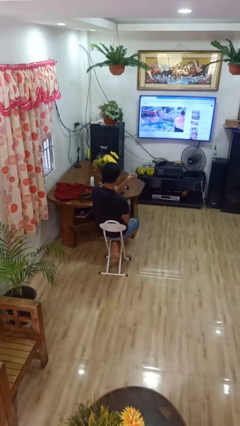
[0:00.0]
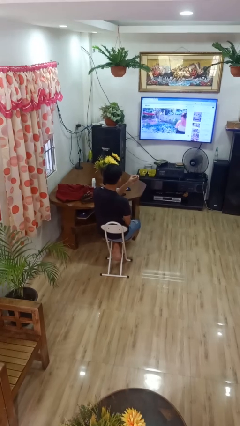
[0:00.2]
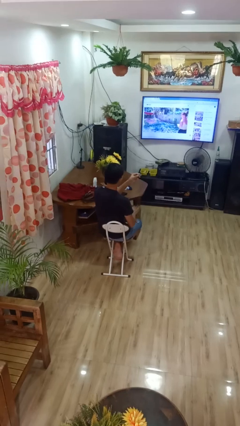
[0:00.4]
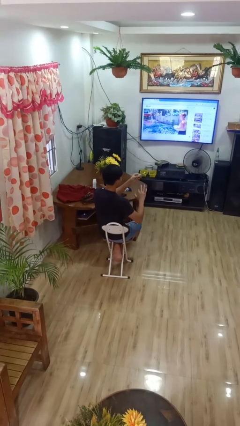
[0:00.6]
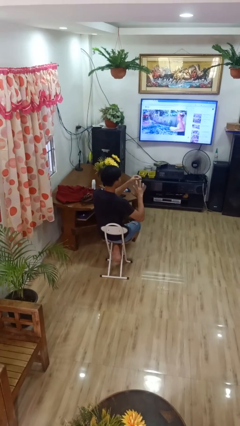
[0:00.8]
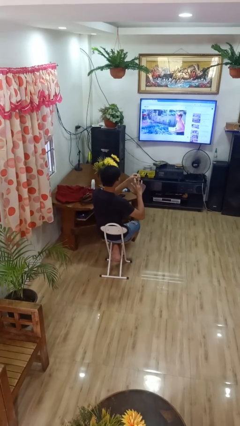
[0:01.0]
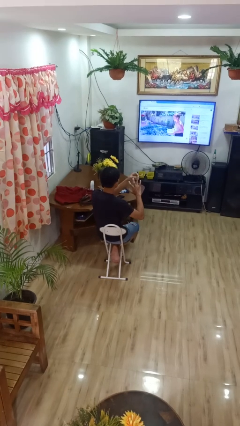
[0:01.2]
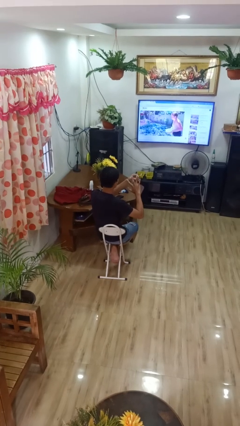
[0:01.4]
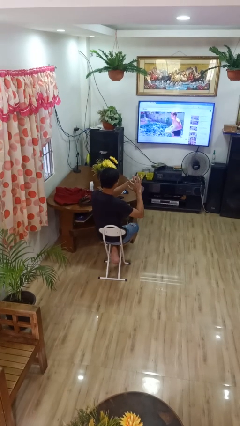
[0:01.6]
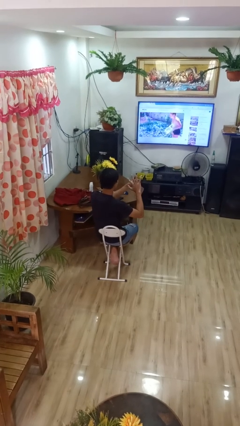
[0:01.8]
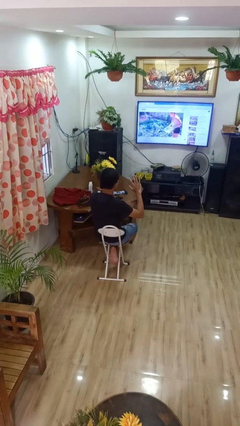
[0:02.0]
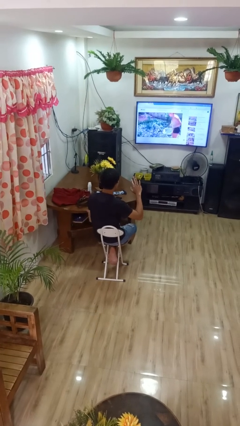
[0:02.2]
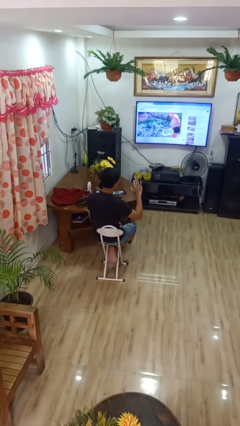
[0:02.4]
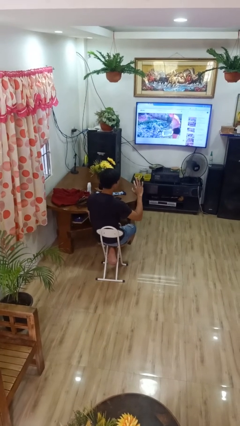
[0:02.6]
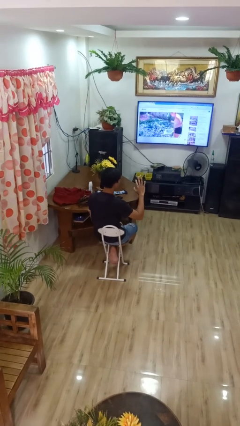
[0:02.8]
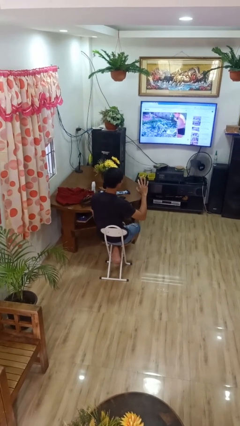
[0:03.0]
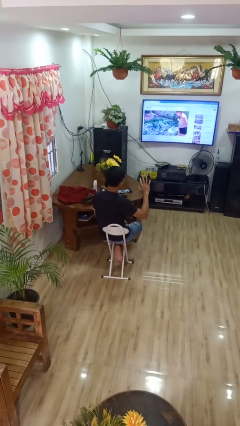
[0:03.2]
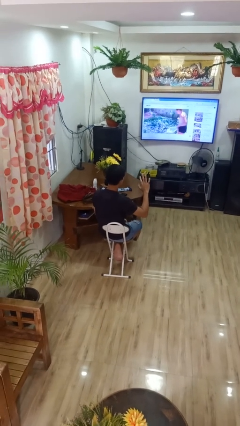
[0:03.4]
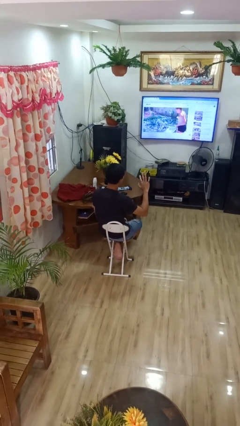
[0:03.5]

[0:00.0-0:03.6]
person puts on ring

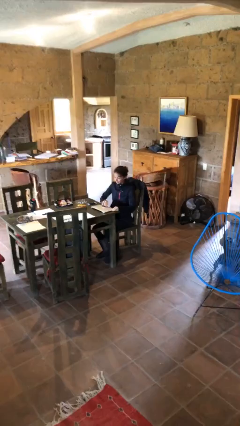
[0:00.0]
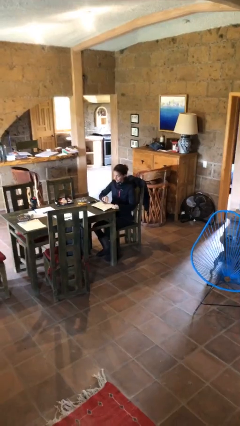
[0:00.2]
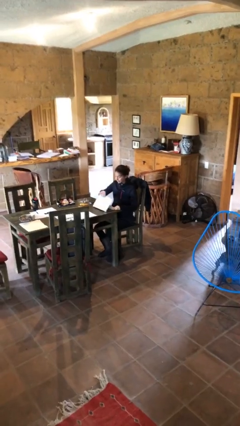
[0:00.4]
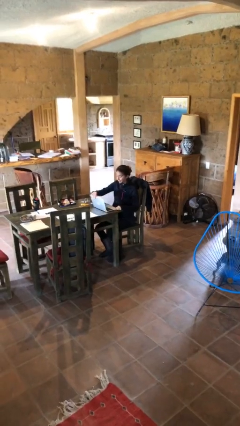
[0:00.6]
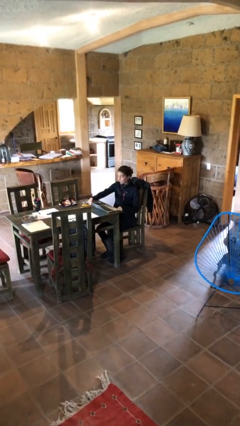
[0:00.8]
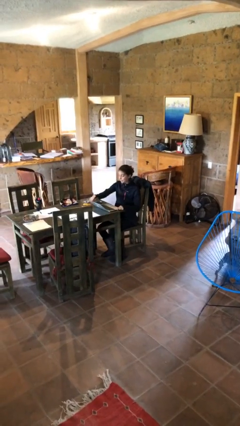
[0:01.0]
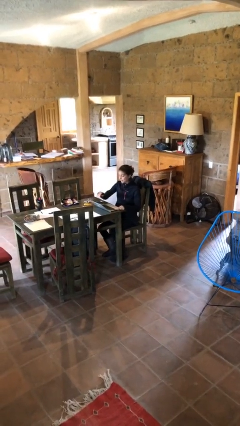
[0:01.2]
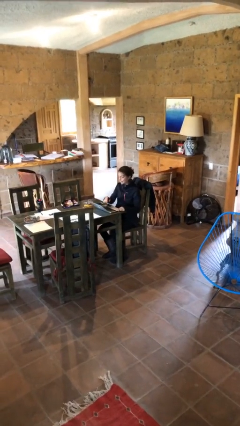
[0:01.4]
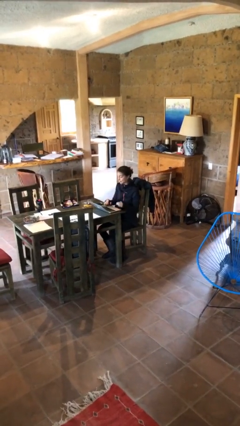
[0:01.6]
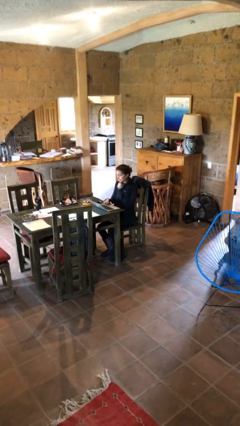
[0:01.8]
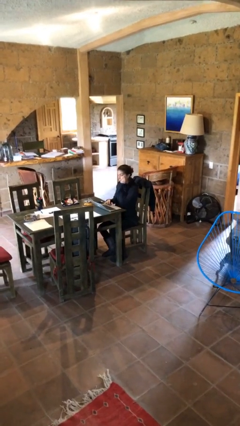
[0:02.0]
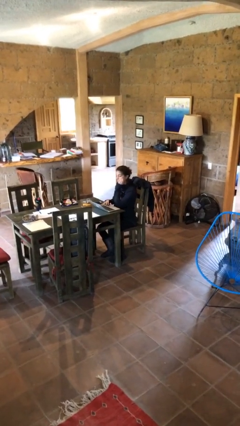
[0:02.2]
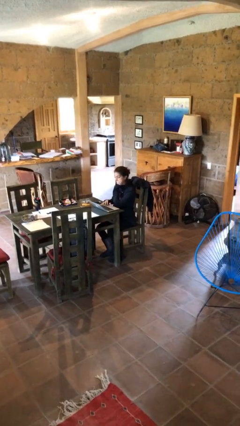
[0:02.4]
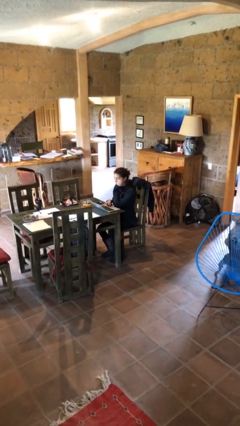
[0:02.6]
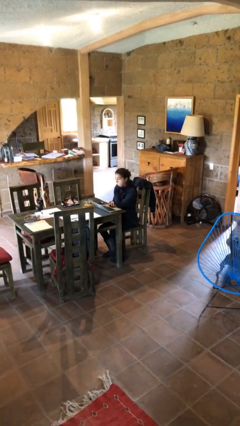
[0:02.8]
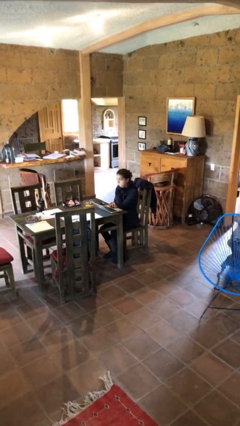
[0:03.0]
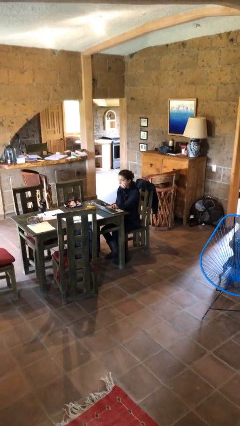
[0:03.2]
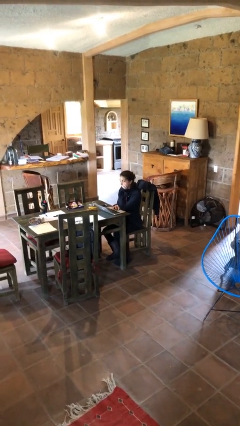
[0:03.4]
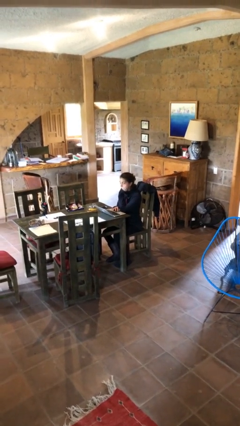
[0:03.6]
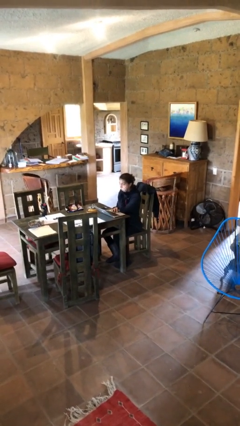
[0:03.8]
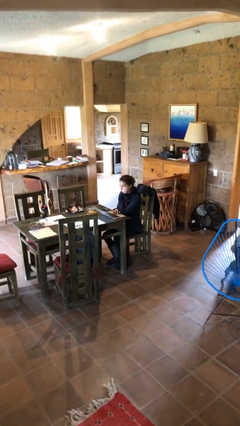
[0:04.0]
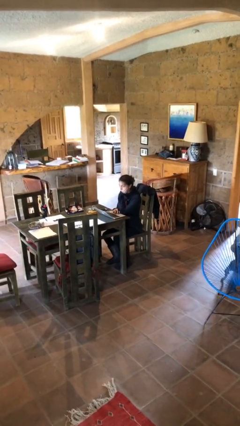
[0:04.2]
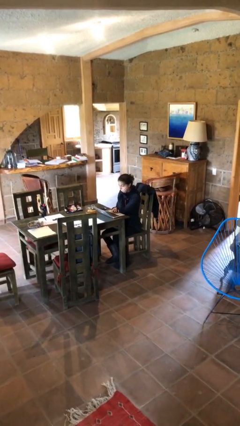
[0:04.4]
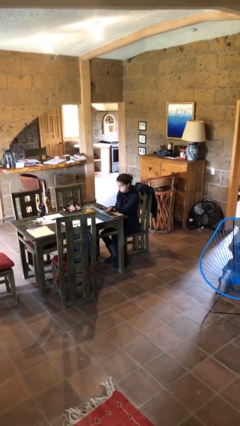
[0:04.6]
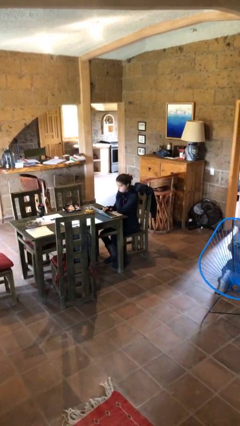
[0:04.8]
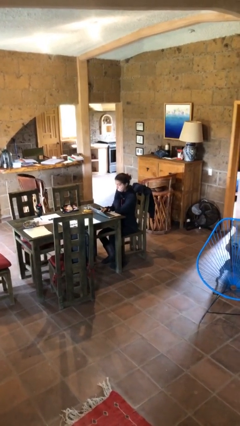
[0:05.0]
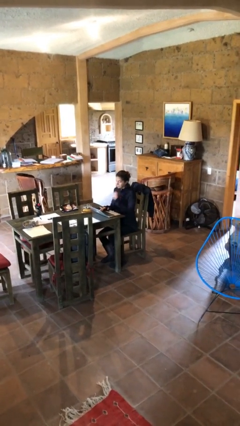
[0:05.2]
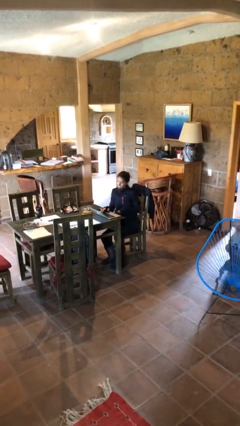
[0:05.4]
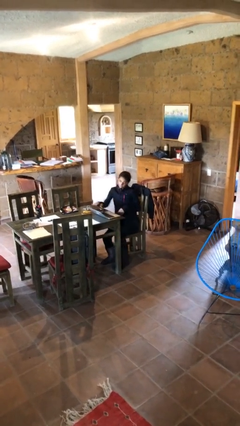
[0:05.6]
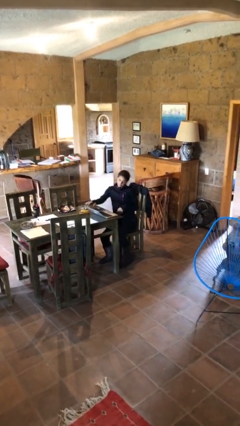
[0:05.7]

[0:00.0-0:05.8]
person interacts with laptop

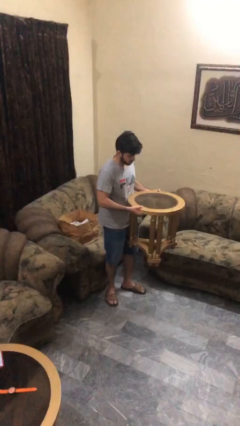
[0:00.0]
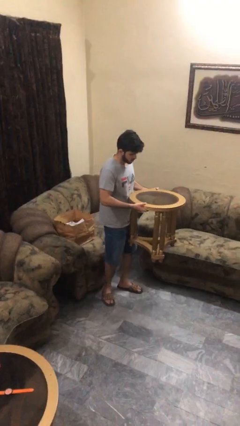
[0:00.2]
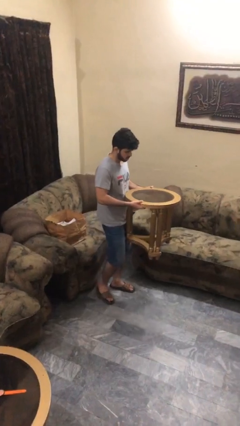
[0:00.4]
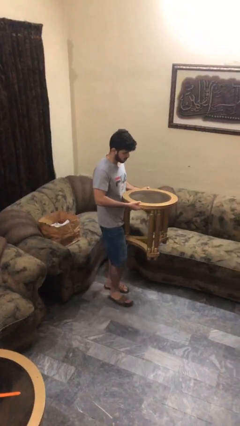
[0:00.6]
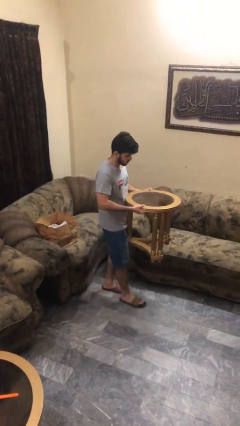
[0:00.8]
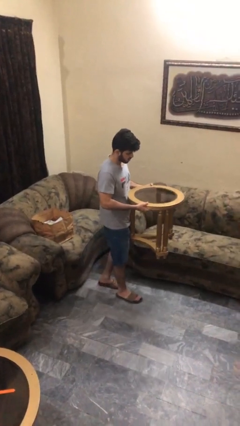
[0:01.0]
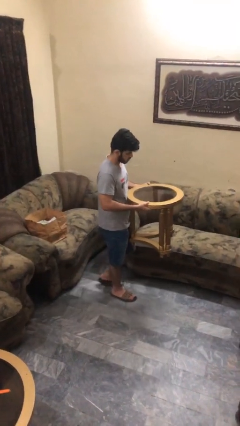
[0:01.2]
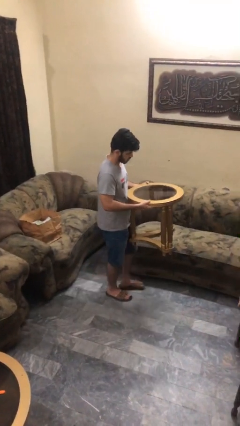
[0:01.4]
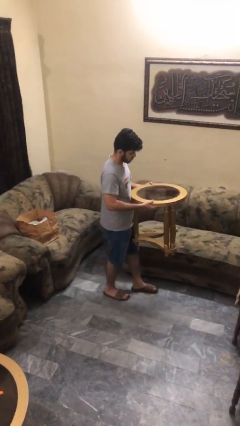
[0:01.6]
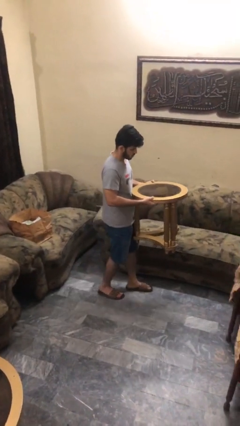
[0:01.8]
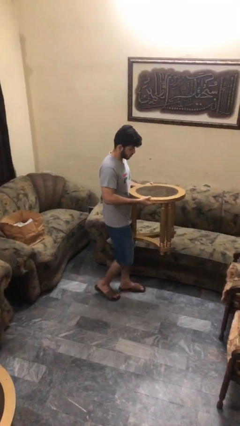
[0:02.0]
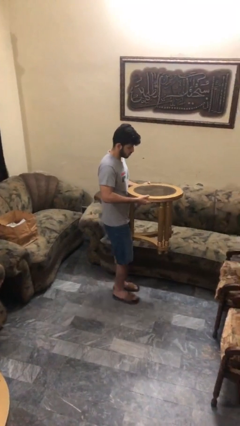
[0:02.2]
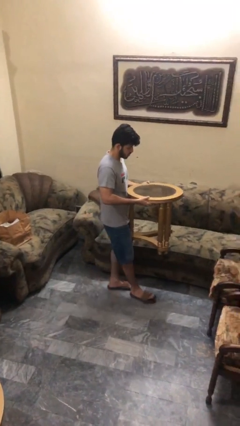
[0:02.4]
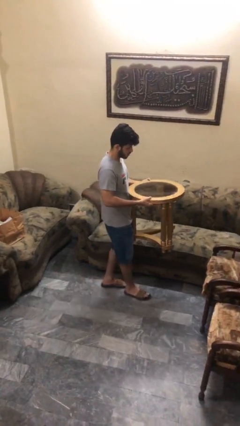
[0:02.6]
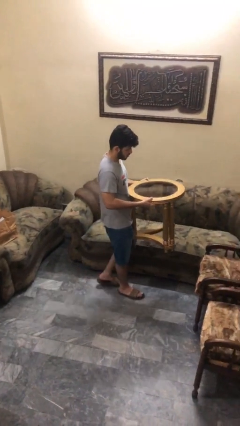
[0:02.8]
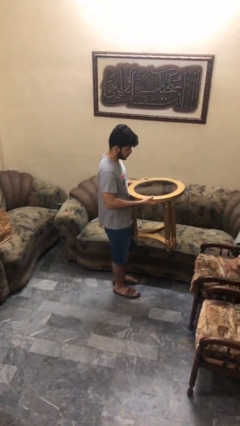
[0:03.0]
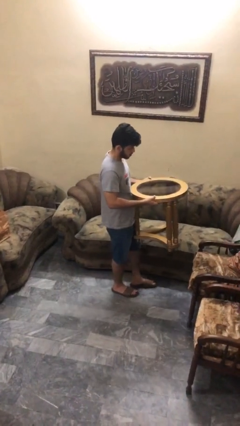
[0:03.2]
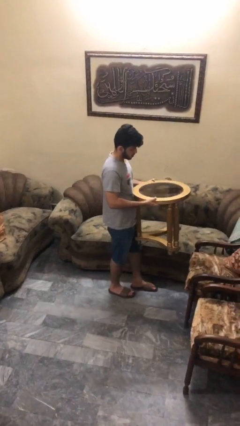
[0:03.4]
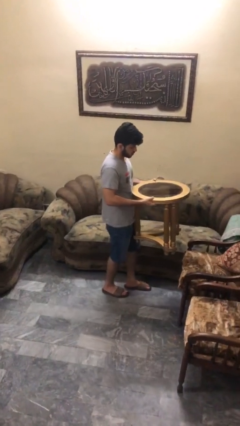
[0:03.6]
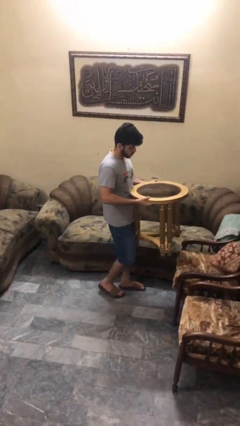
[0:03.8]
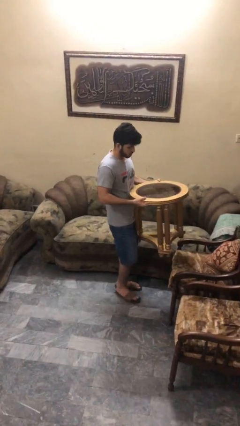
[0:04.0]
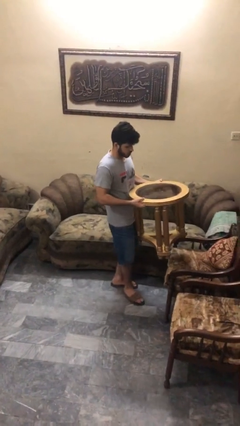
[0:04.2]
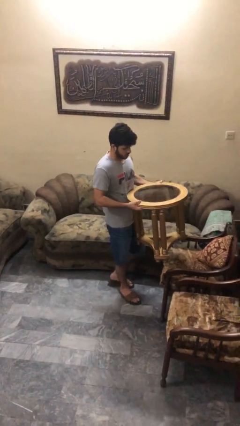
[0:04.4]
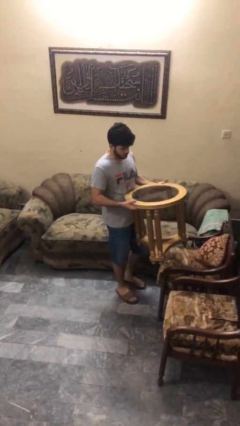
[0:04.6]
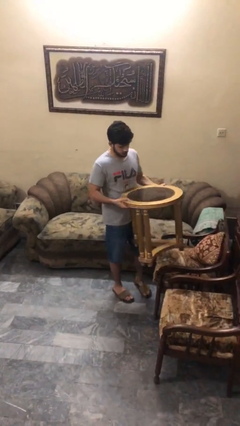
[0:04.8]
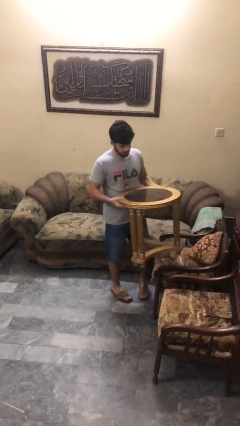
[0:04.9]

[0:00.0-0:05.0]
person carries furniture

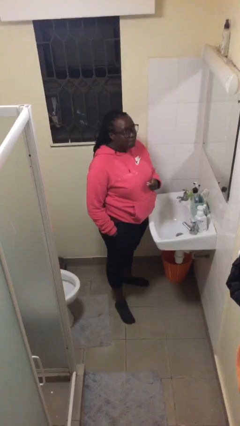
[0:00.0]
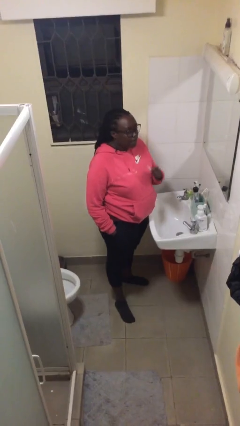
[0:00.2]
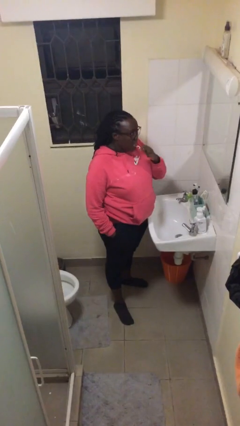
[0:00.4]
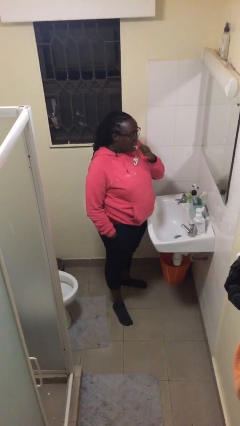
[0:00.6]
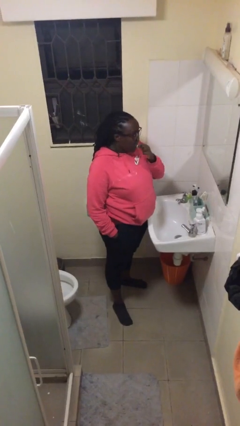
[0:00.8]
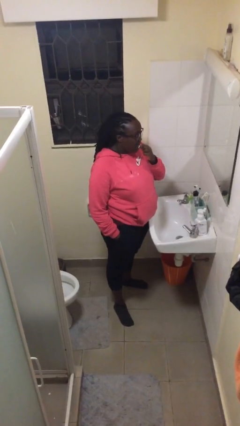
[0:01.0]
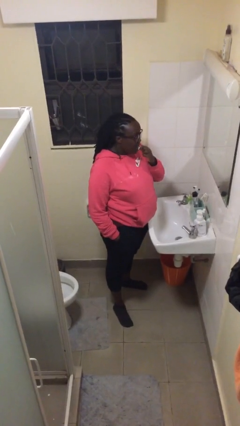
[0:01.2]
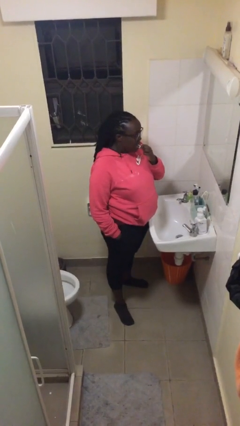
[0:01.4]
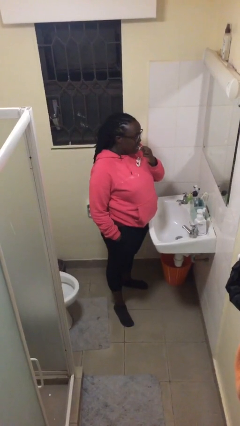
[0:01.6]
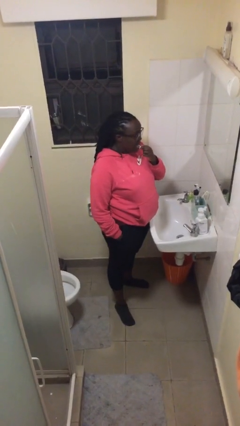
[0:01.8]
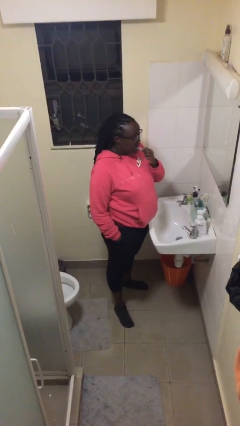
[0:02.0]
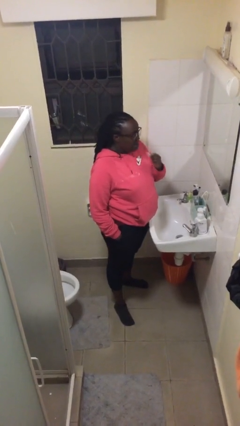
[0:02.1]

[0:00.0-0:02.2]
person flosses

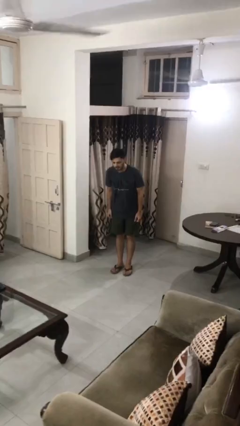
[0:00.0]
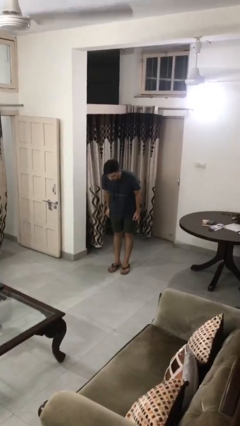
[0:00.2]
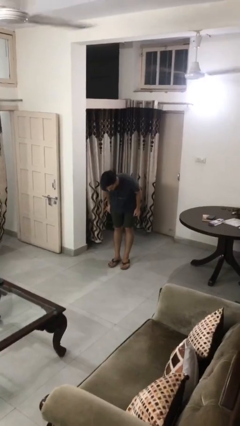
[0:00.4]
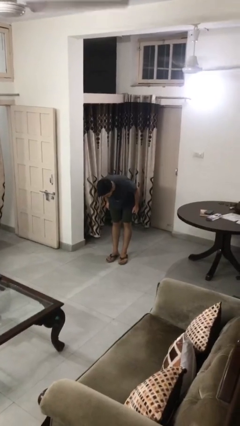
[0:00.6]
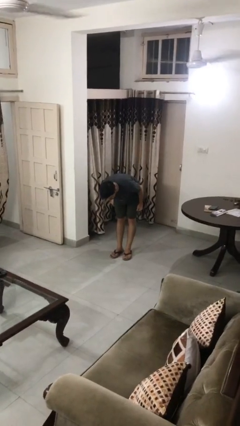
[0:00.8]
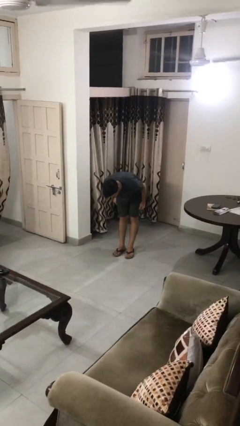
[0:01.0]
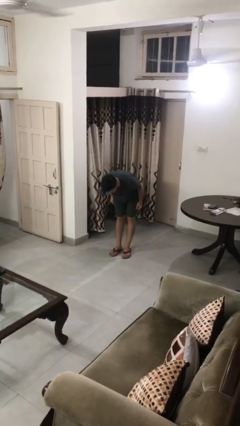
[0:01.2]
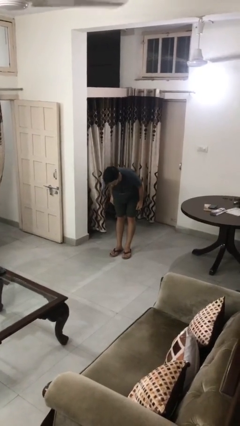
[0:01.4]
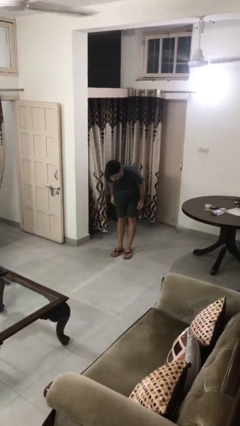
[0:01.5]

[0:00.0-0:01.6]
person bows
